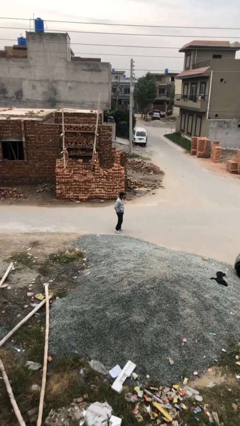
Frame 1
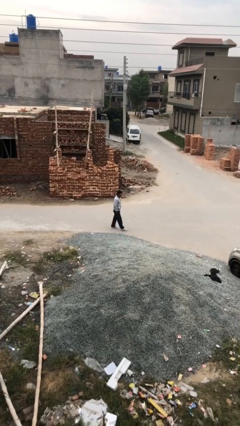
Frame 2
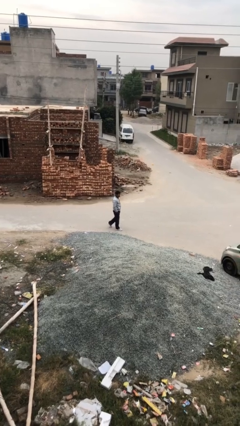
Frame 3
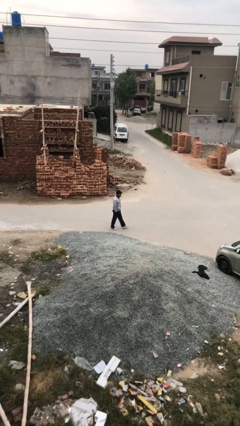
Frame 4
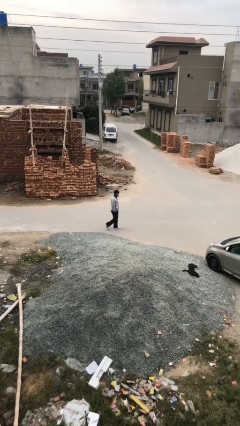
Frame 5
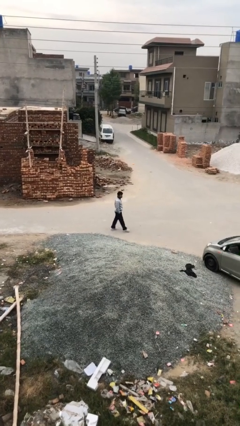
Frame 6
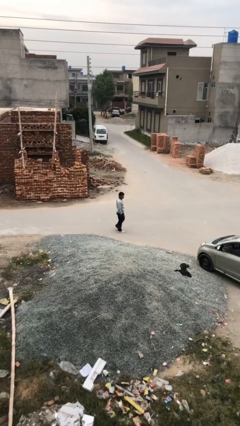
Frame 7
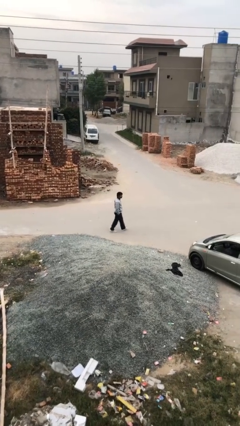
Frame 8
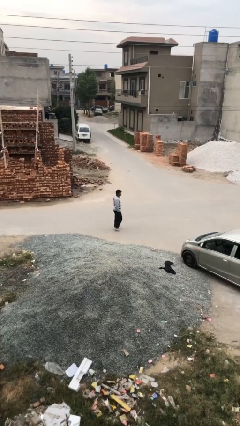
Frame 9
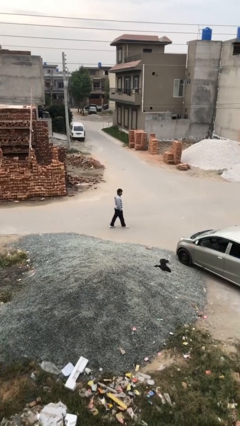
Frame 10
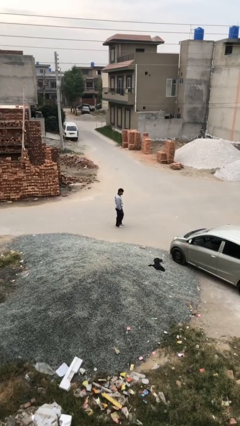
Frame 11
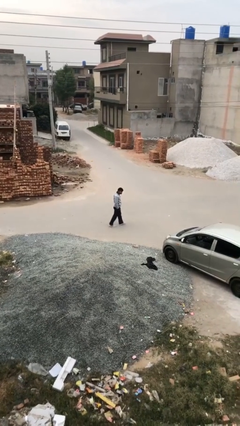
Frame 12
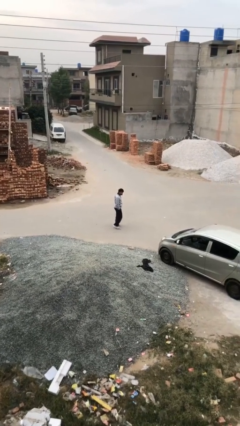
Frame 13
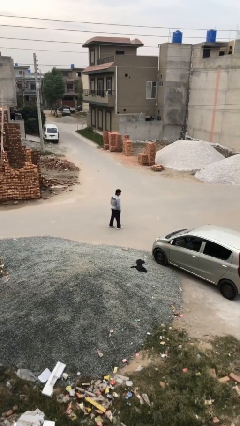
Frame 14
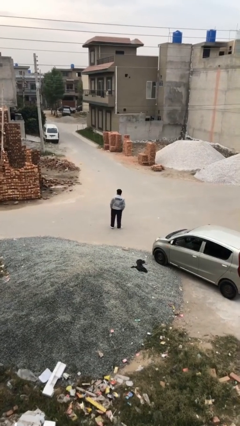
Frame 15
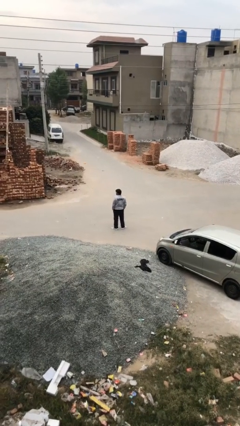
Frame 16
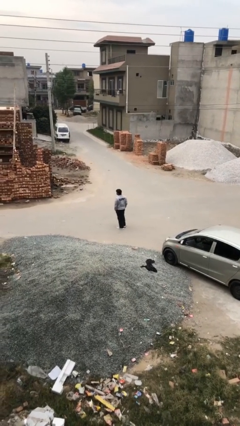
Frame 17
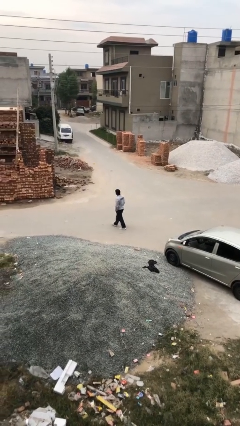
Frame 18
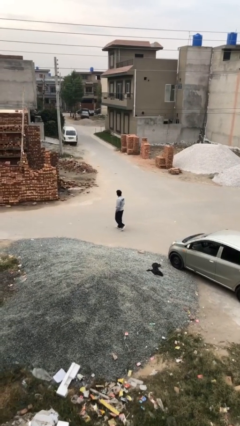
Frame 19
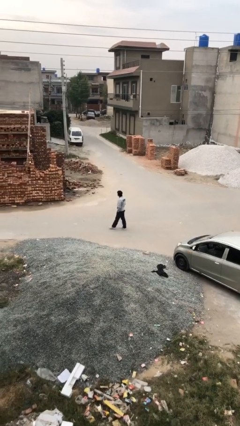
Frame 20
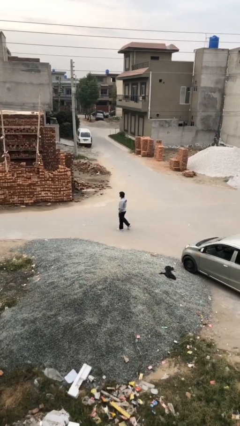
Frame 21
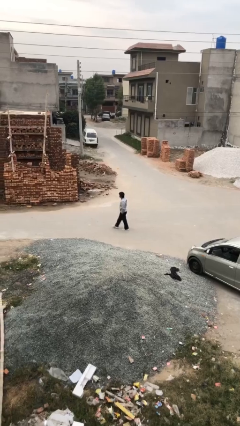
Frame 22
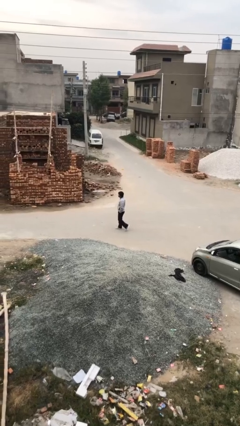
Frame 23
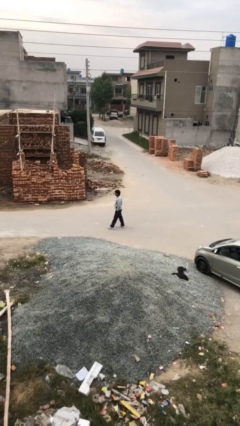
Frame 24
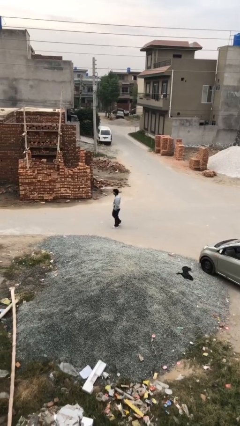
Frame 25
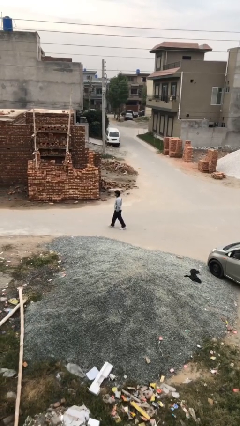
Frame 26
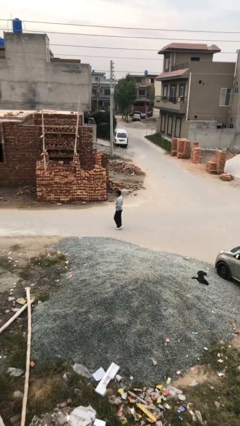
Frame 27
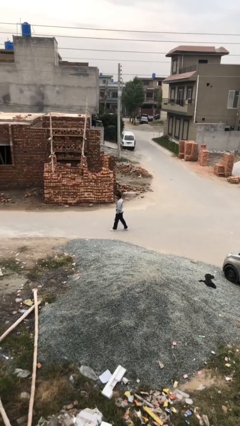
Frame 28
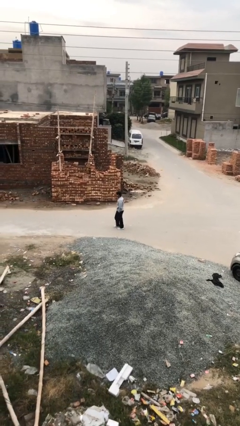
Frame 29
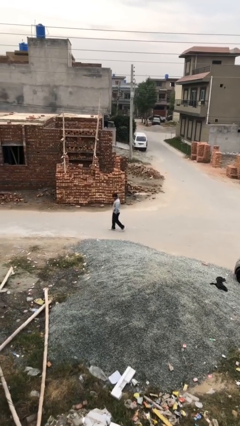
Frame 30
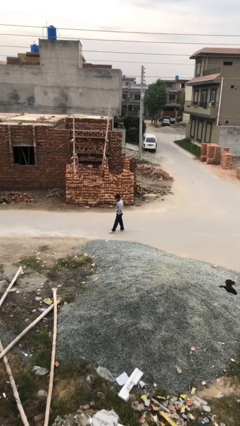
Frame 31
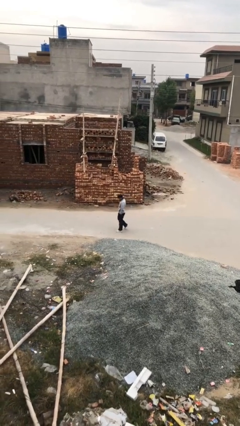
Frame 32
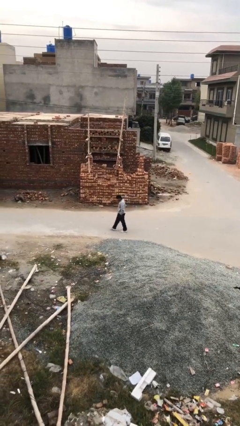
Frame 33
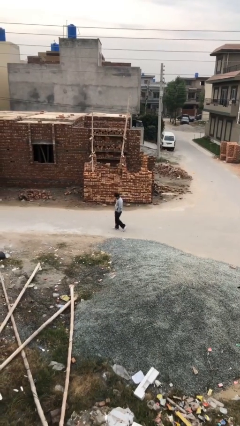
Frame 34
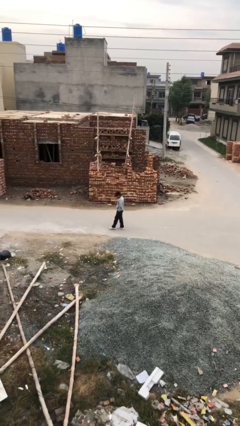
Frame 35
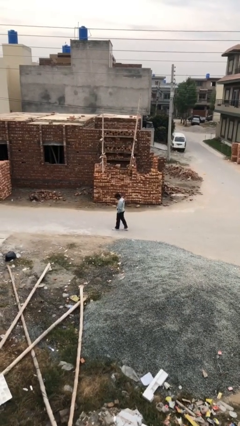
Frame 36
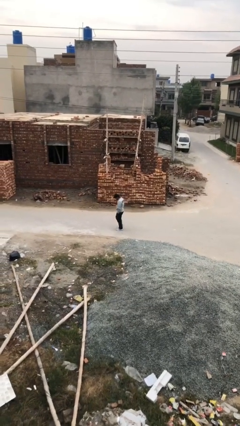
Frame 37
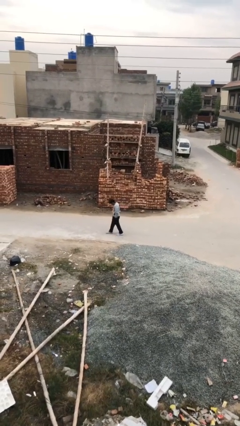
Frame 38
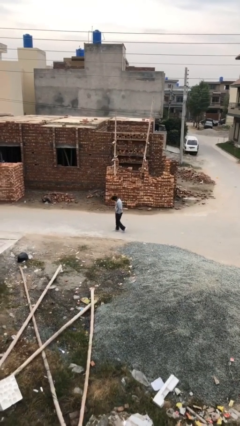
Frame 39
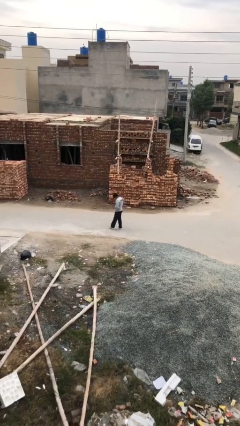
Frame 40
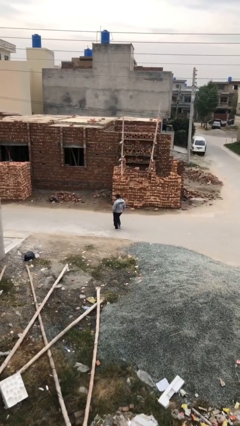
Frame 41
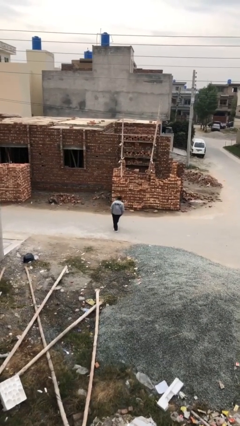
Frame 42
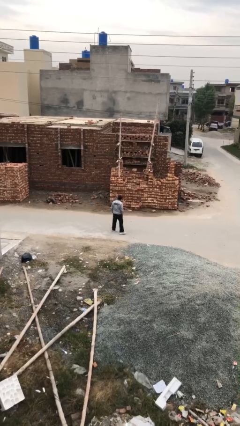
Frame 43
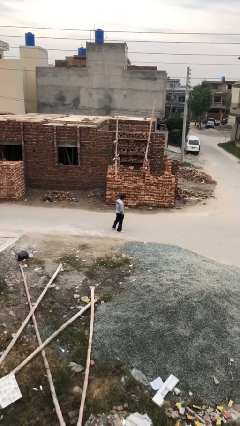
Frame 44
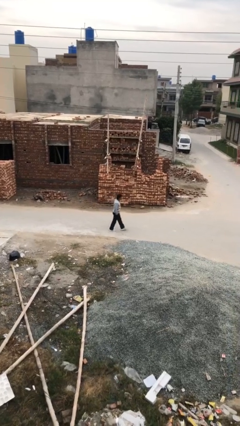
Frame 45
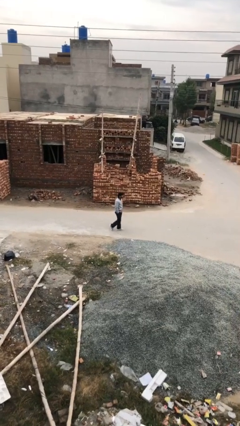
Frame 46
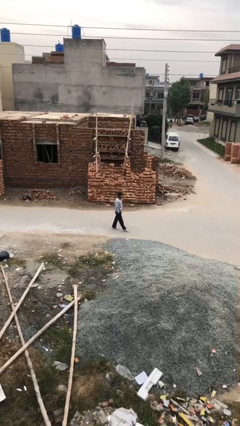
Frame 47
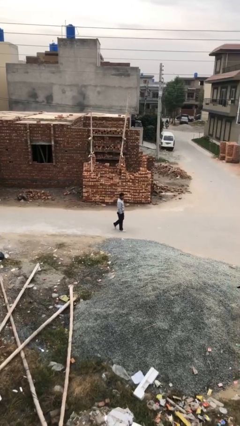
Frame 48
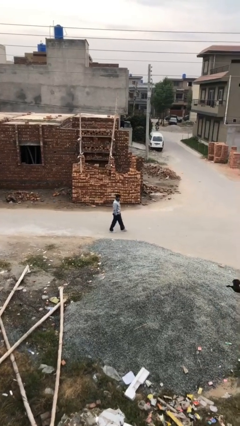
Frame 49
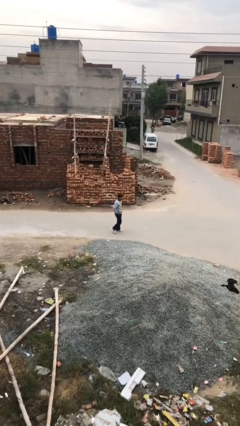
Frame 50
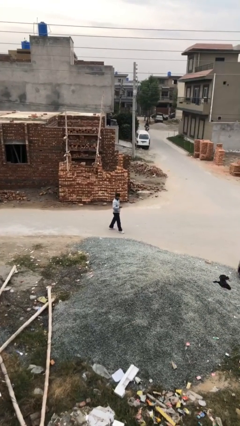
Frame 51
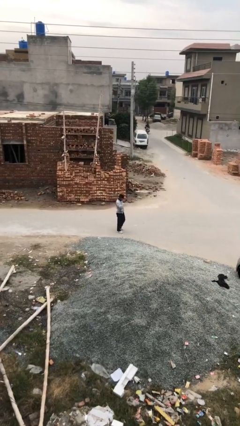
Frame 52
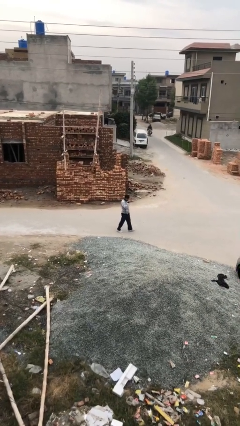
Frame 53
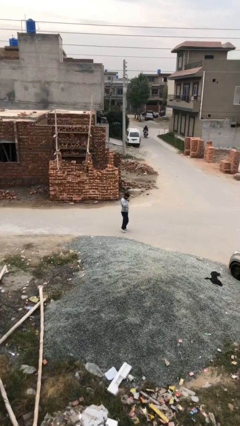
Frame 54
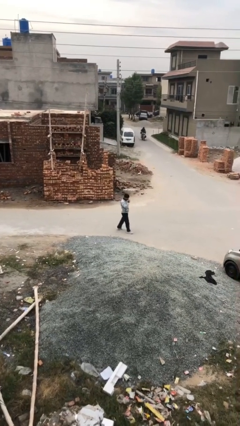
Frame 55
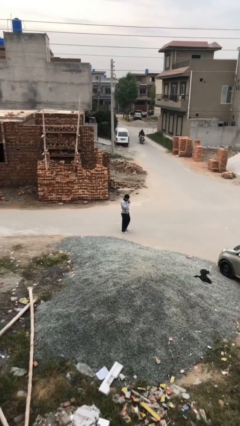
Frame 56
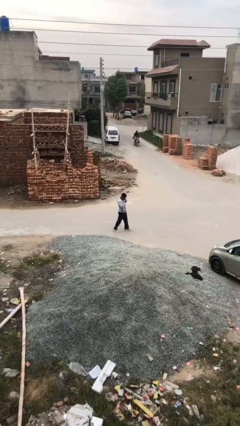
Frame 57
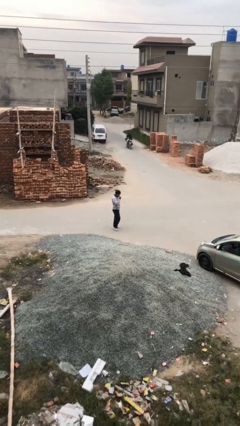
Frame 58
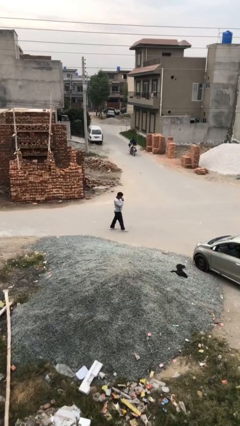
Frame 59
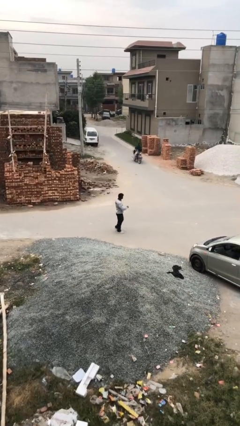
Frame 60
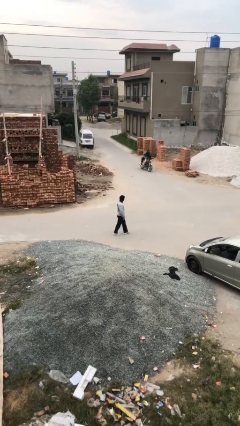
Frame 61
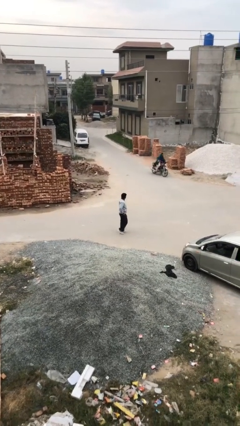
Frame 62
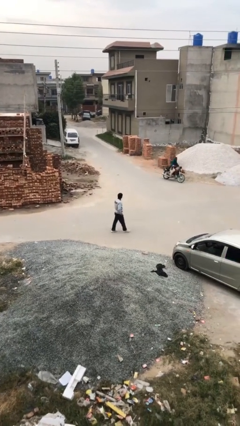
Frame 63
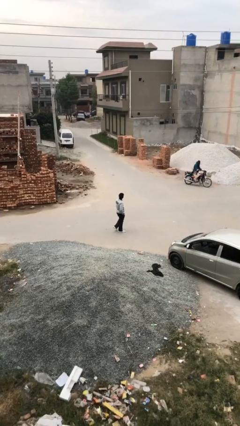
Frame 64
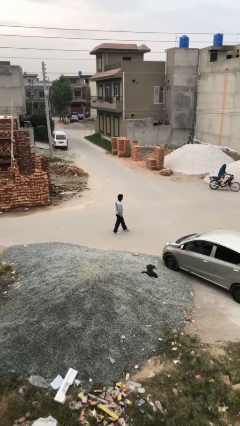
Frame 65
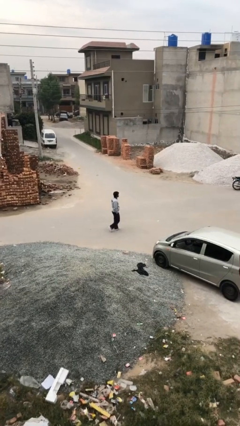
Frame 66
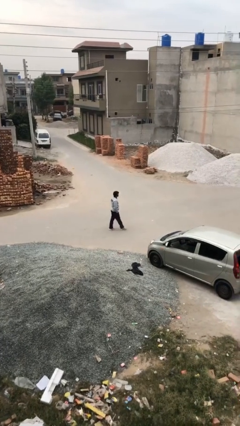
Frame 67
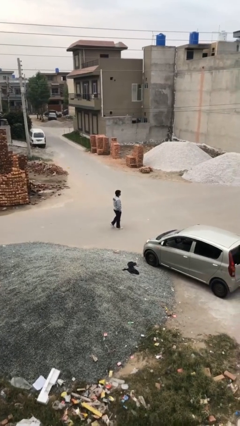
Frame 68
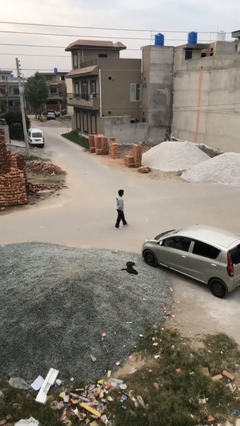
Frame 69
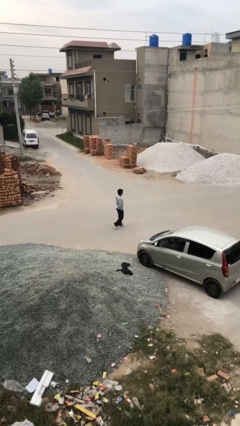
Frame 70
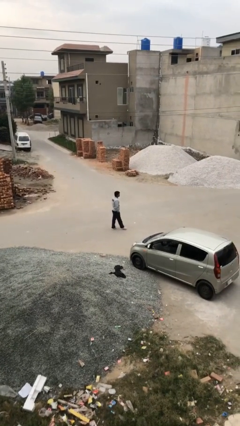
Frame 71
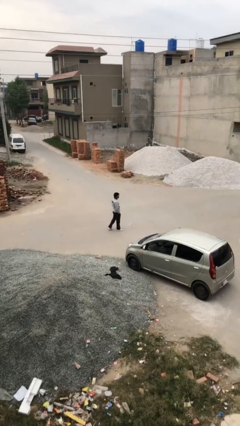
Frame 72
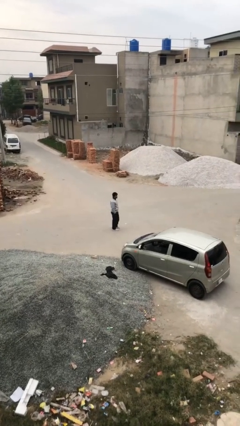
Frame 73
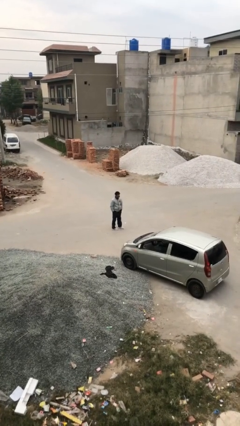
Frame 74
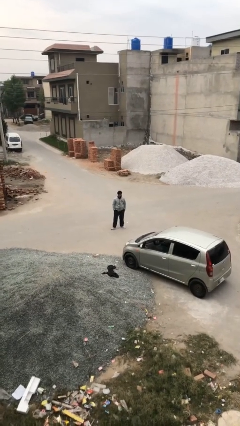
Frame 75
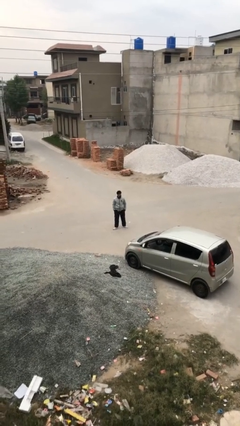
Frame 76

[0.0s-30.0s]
person walks

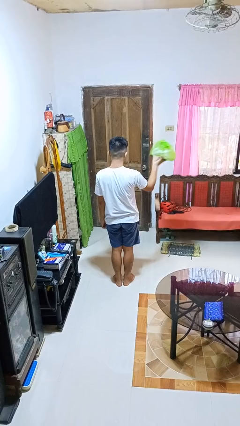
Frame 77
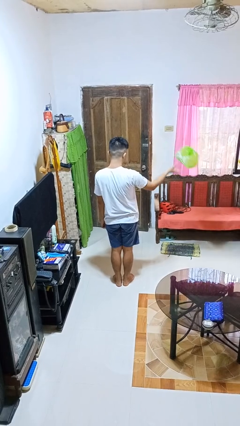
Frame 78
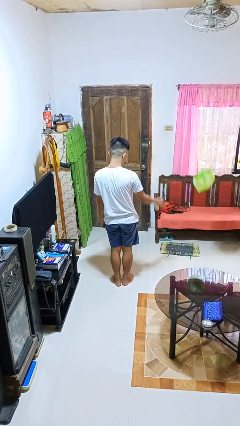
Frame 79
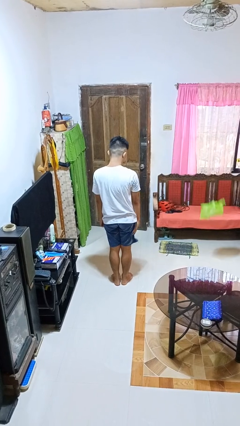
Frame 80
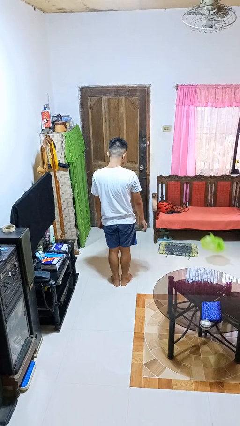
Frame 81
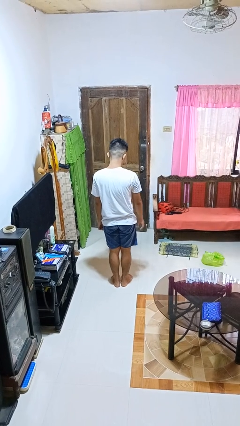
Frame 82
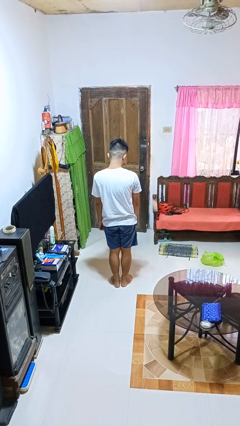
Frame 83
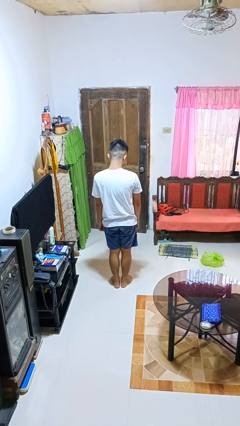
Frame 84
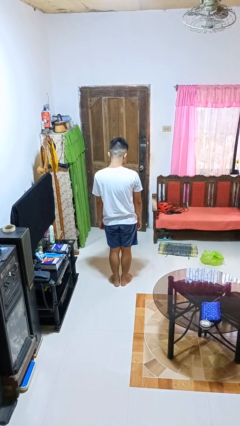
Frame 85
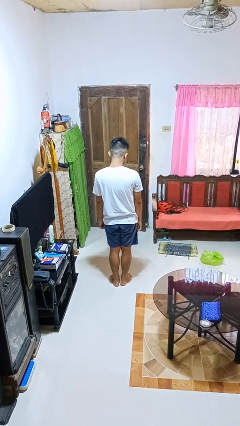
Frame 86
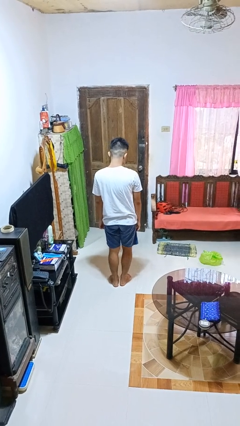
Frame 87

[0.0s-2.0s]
person throws object to ground

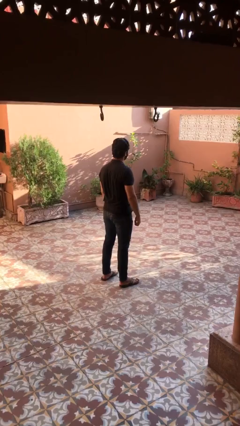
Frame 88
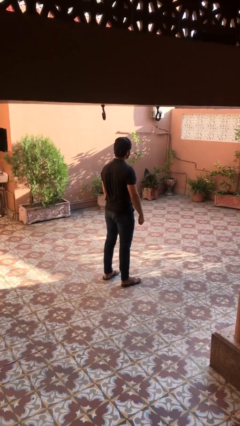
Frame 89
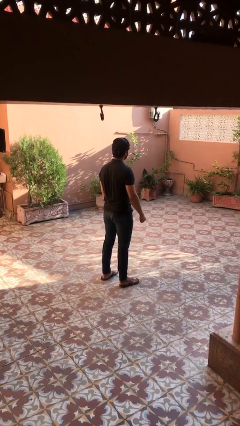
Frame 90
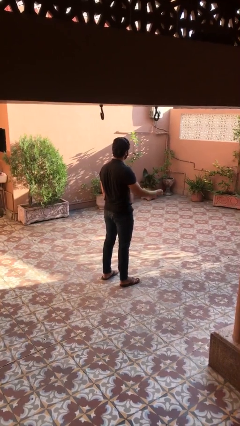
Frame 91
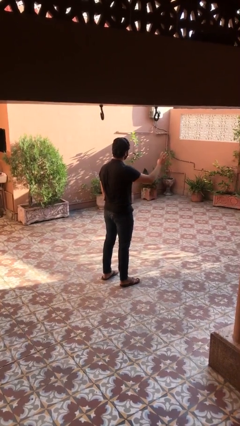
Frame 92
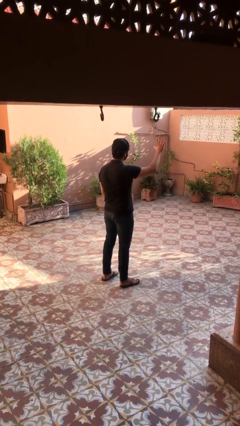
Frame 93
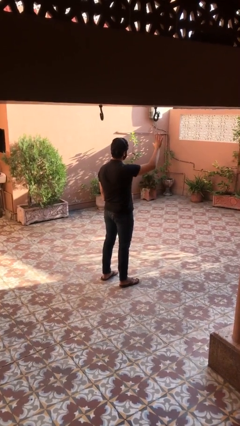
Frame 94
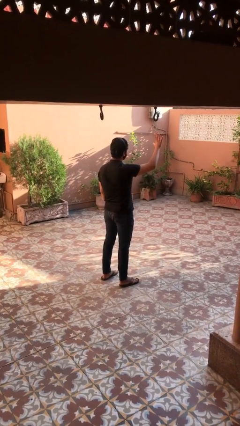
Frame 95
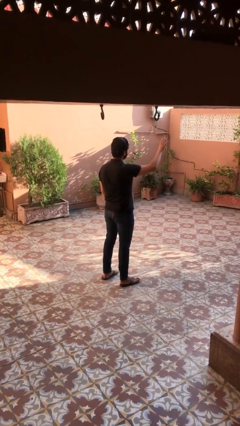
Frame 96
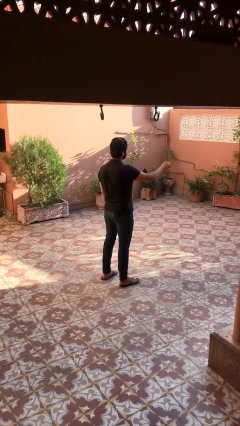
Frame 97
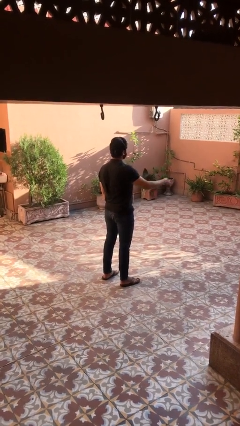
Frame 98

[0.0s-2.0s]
person gestures number five
